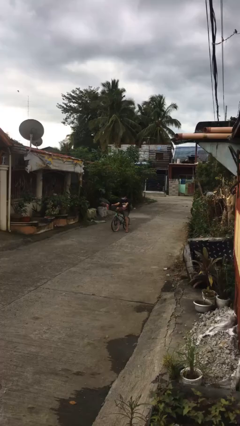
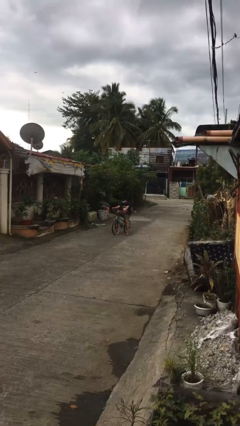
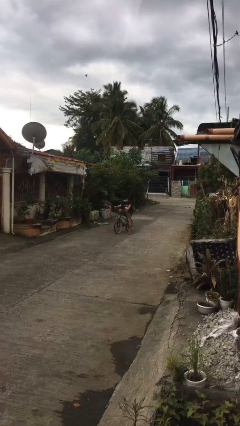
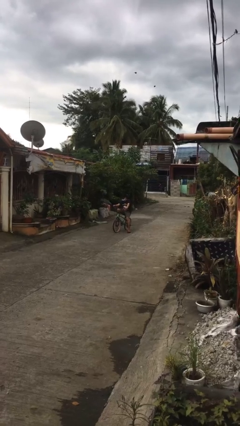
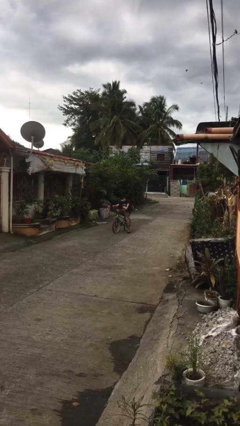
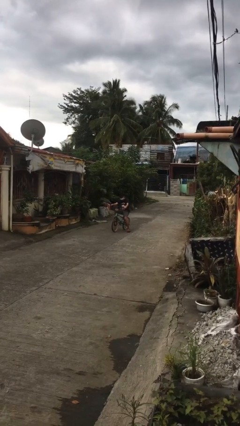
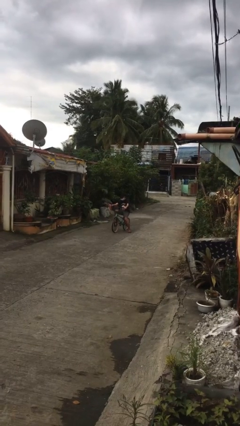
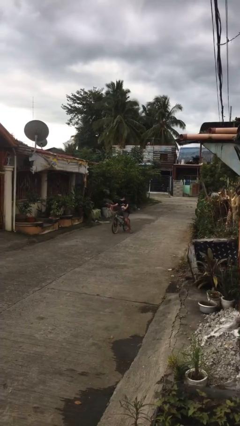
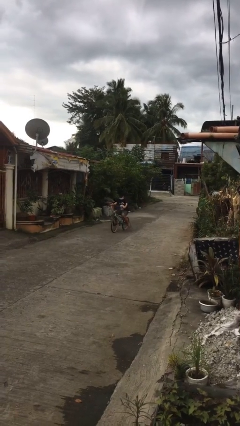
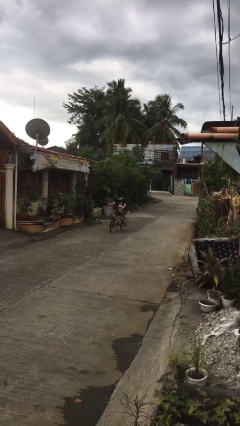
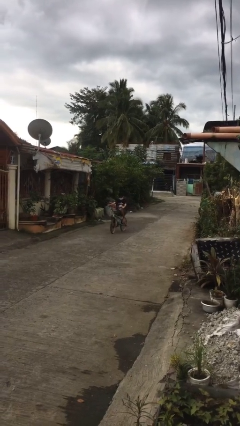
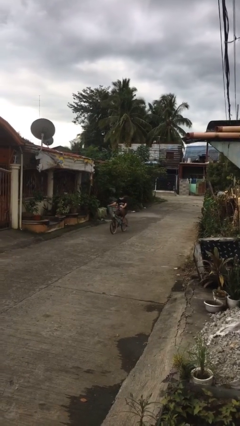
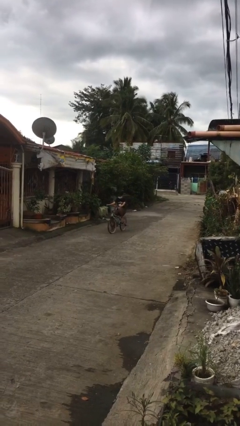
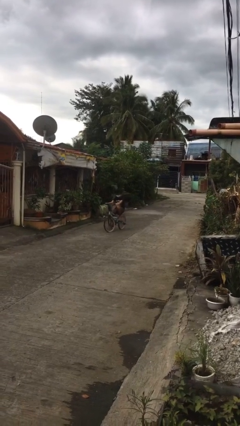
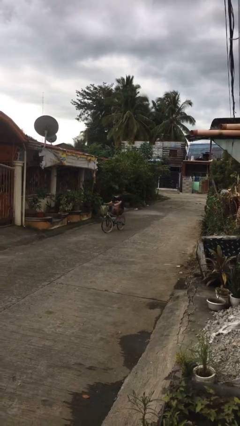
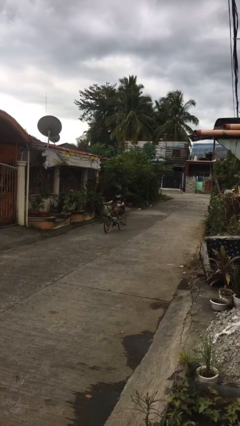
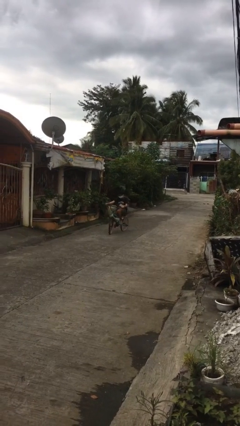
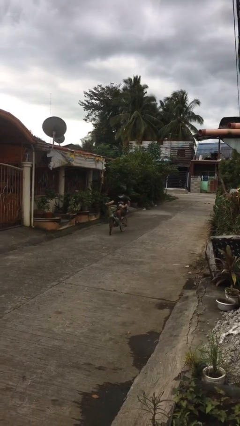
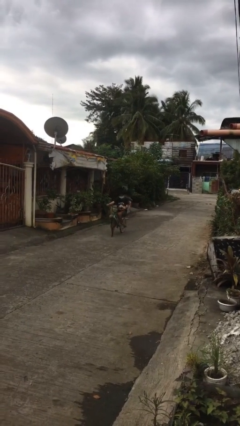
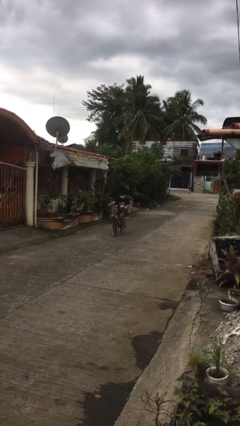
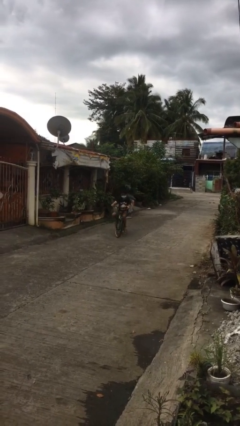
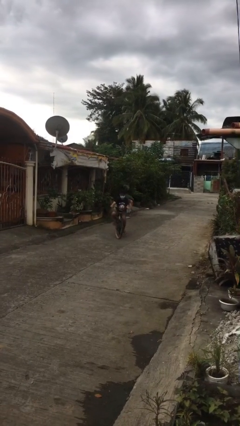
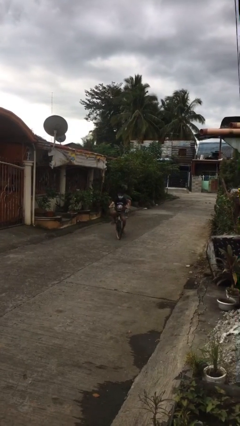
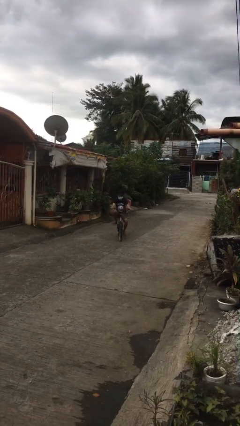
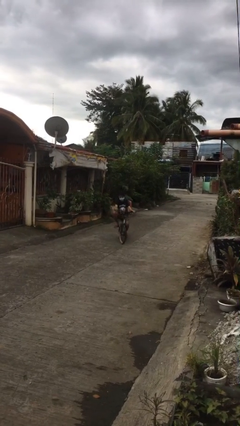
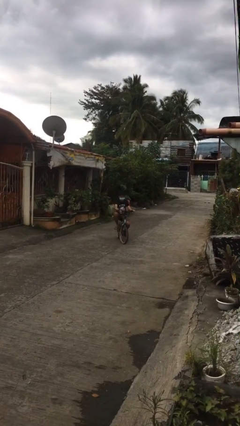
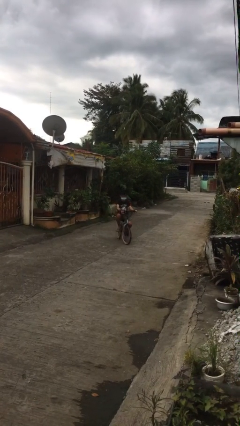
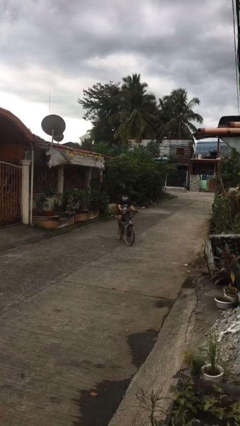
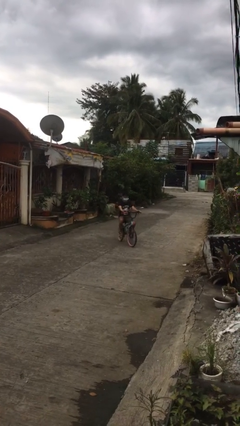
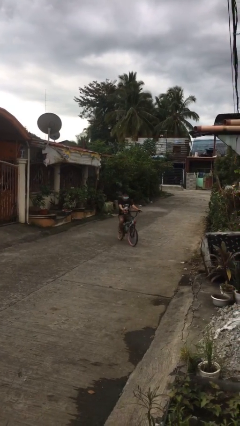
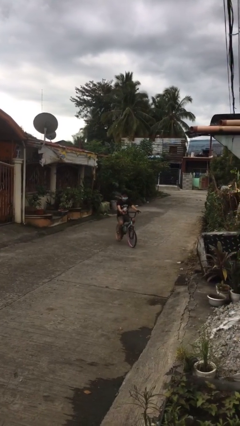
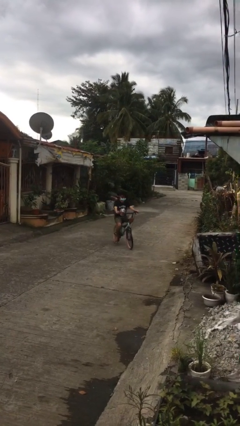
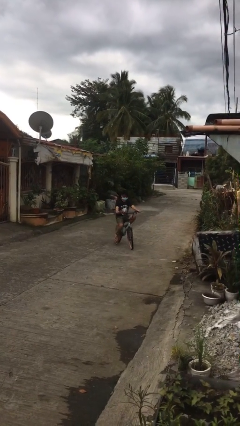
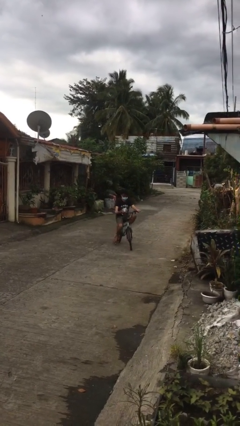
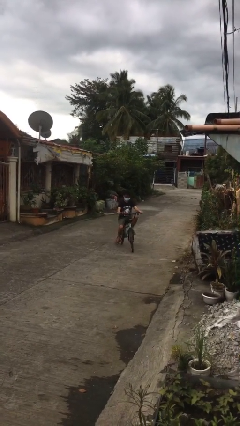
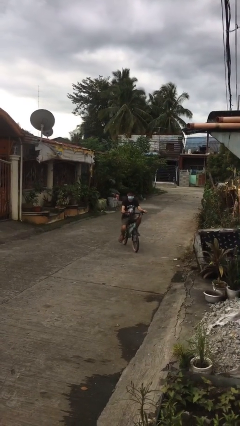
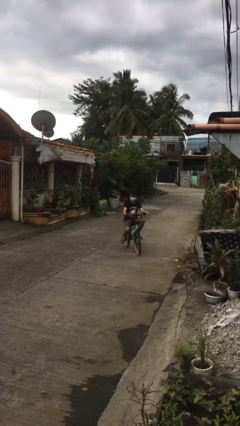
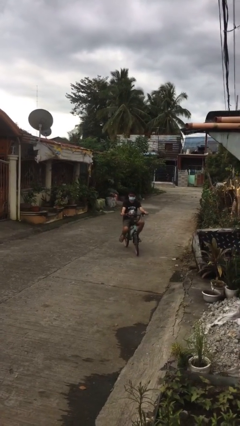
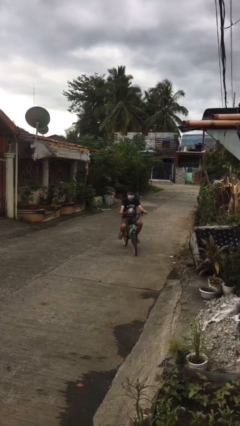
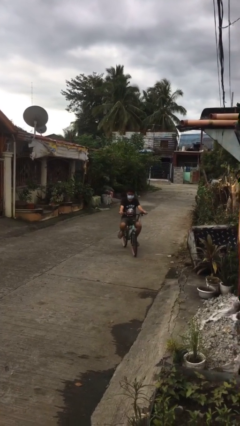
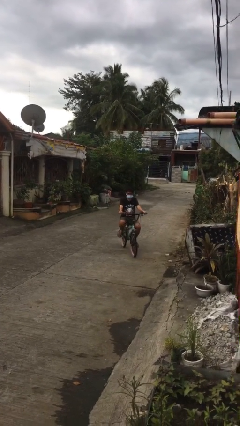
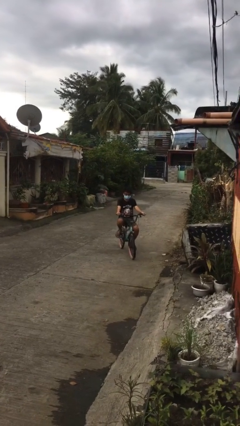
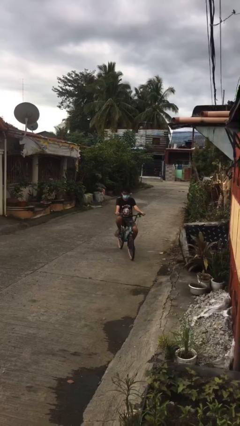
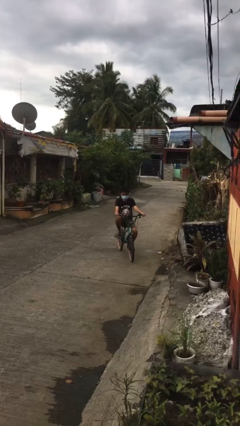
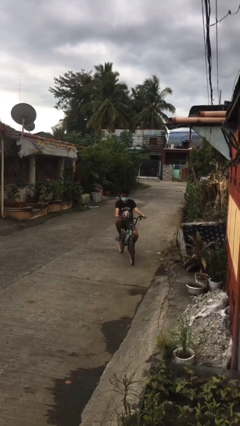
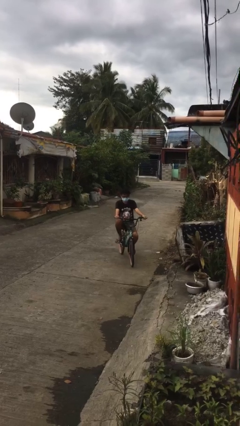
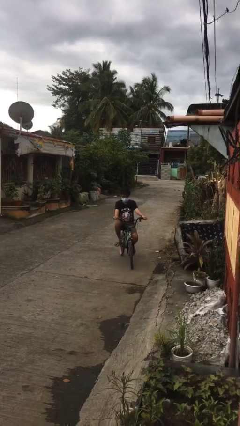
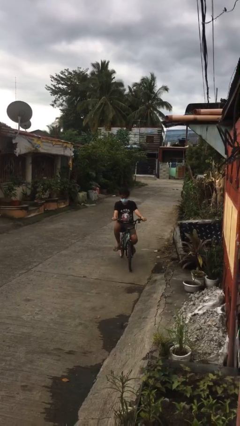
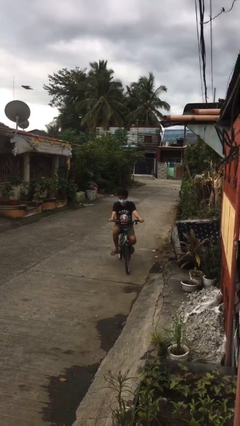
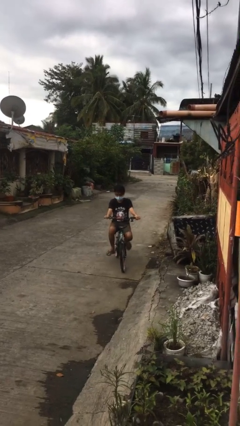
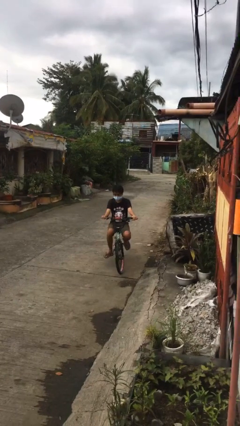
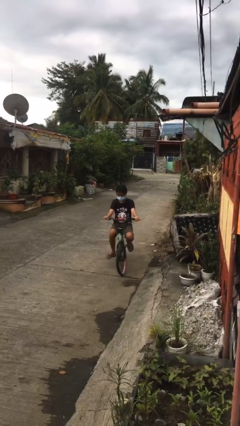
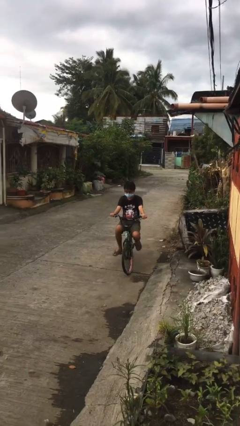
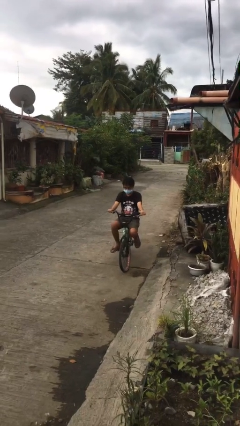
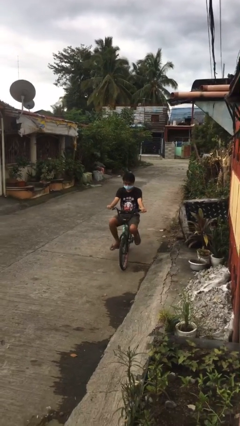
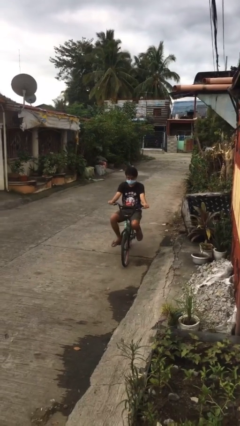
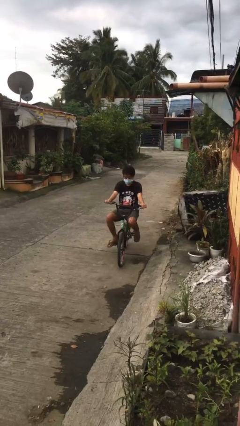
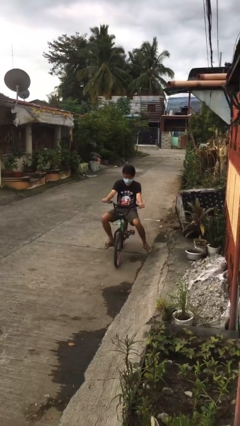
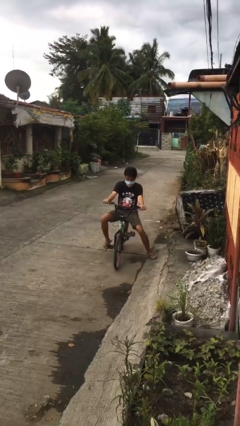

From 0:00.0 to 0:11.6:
person rides bicycle

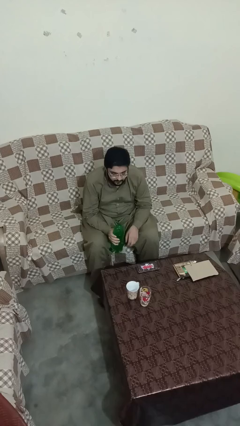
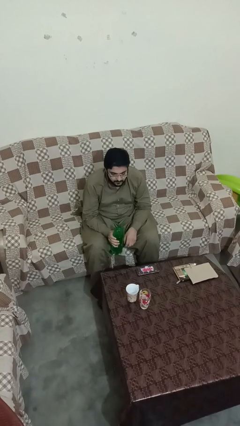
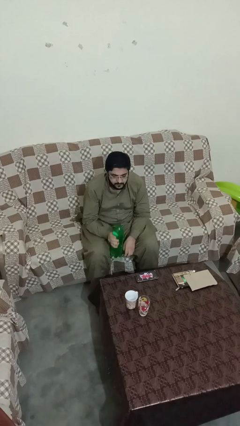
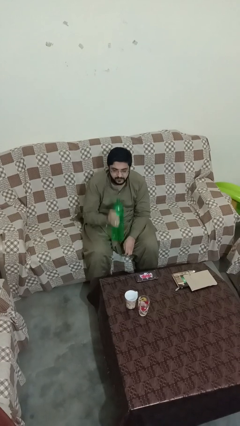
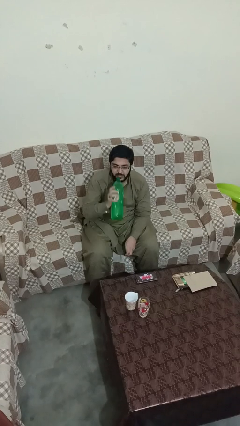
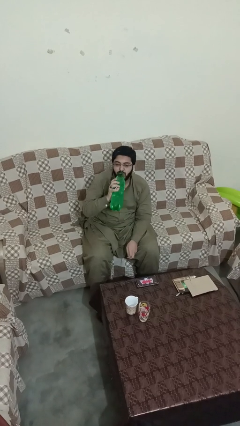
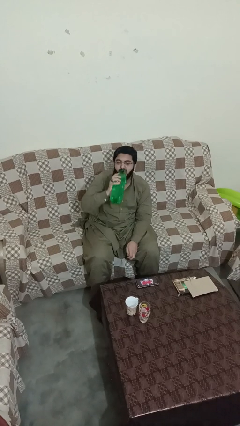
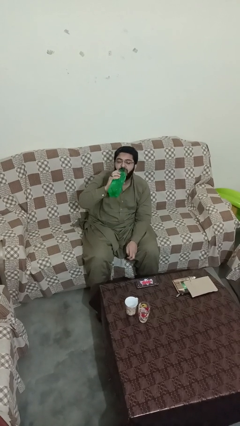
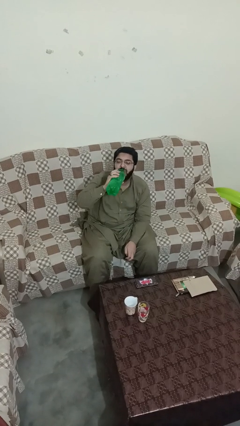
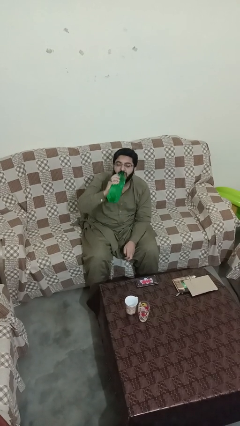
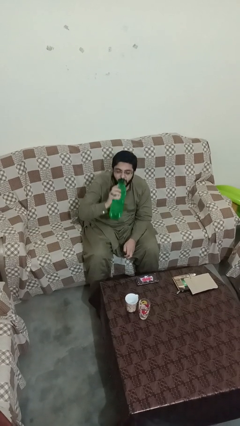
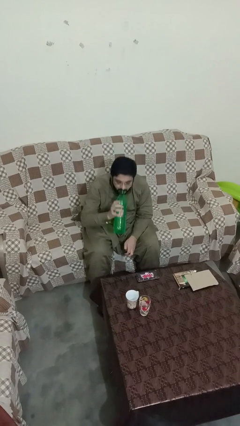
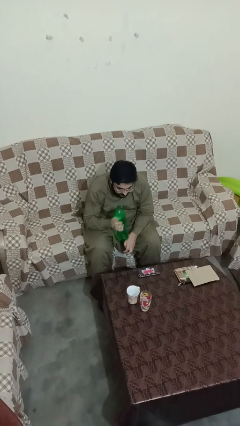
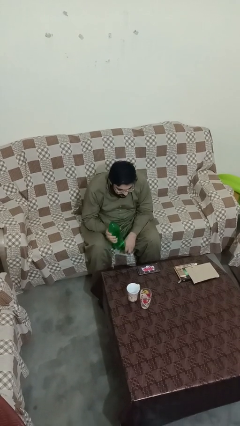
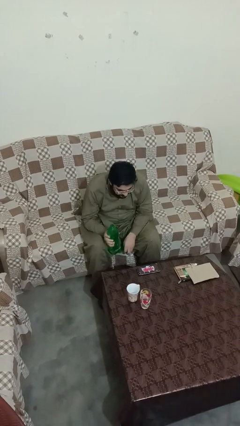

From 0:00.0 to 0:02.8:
person drinks from bottle

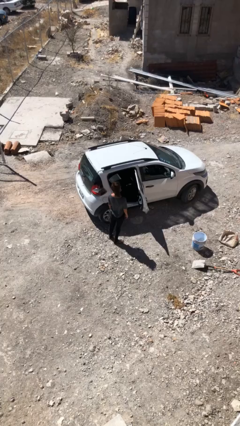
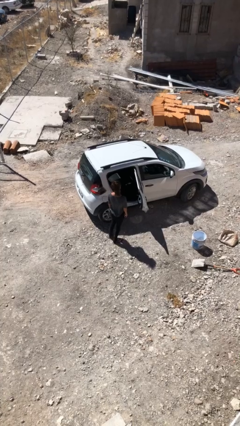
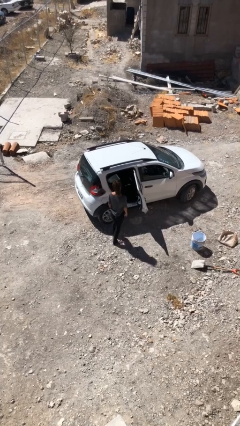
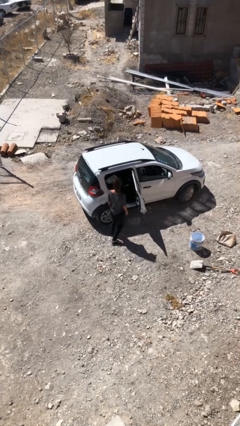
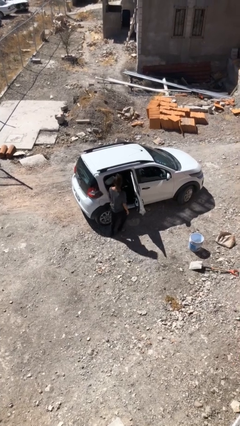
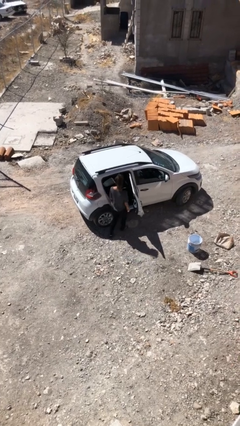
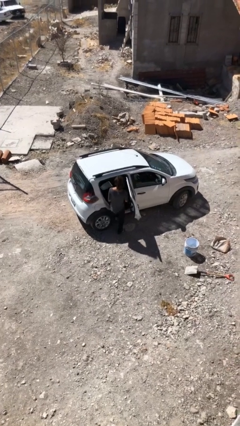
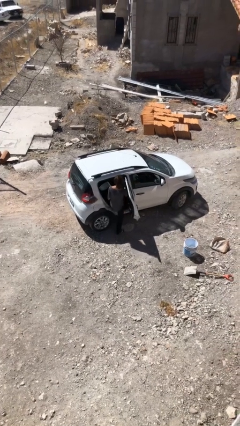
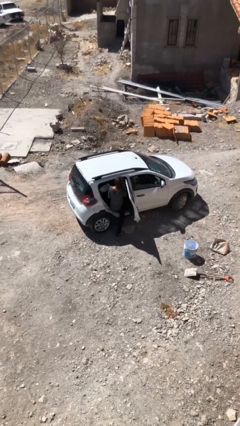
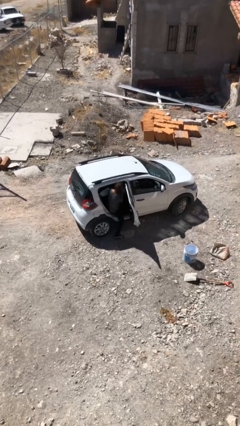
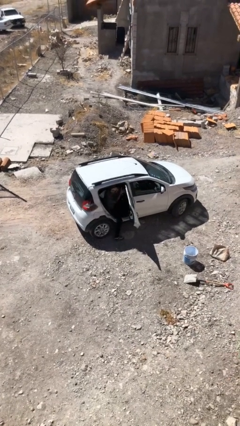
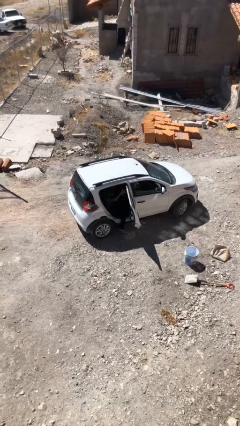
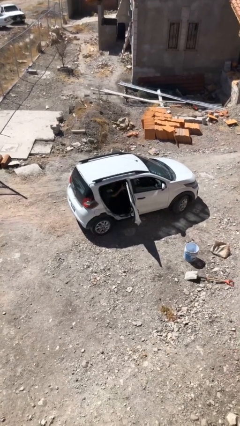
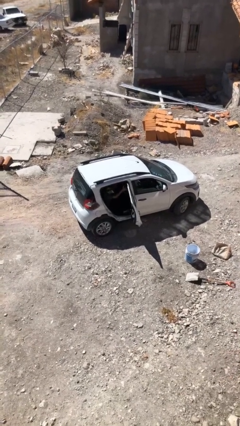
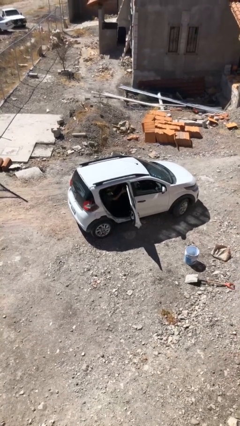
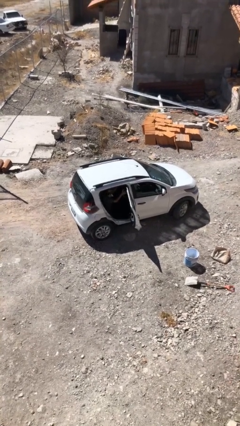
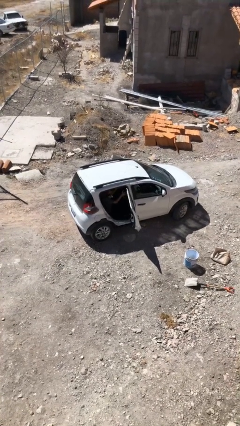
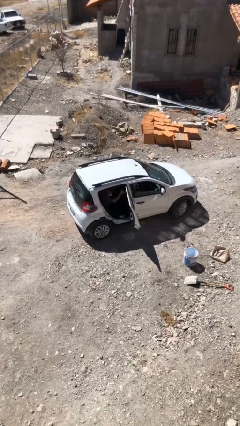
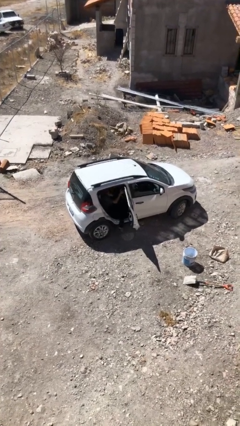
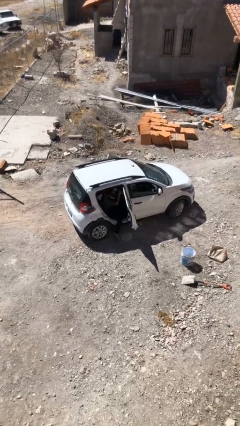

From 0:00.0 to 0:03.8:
person enters car

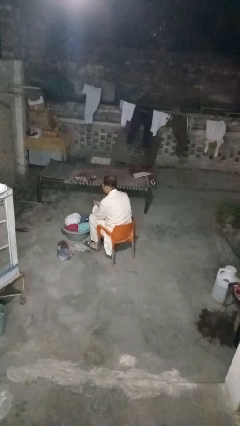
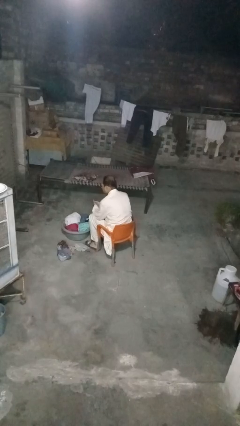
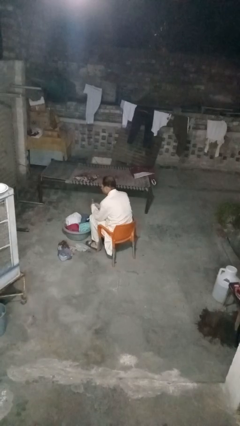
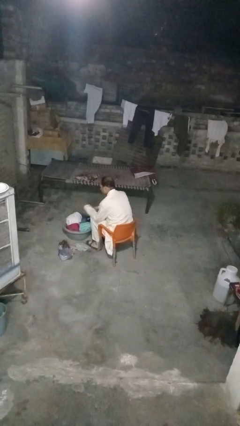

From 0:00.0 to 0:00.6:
person takes object from basket
